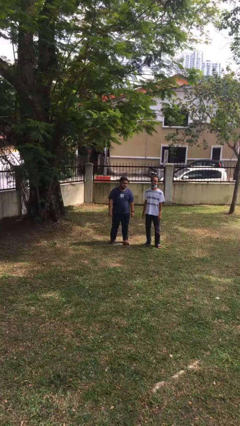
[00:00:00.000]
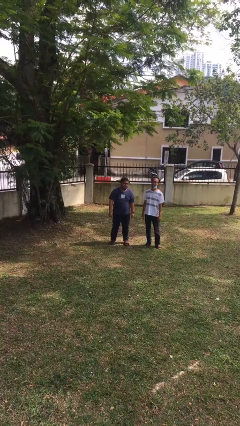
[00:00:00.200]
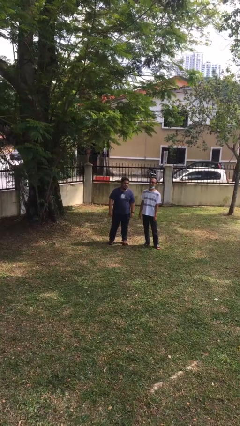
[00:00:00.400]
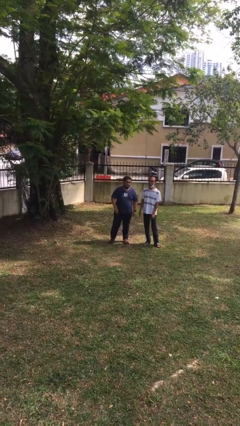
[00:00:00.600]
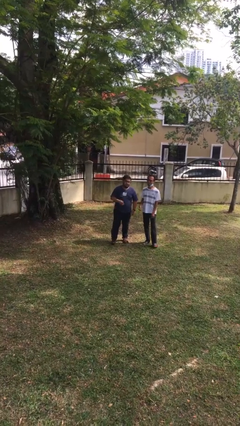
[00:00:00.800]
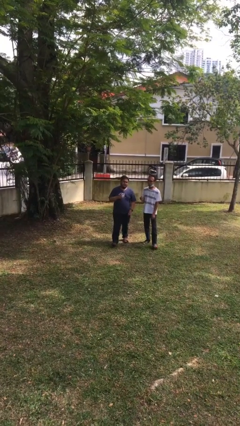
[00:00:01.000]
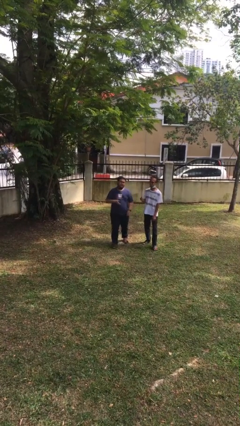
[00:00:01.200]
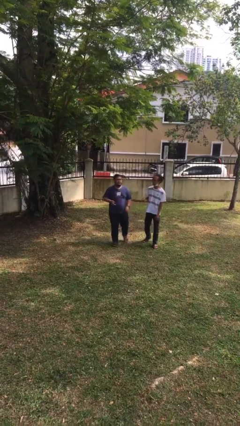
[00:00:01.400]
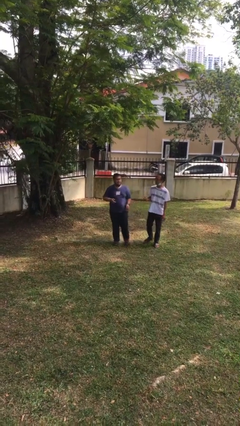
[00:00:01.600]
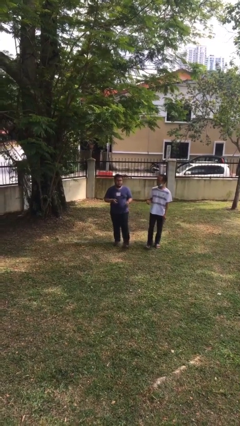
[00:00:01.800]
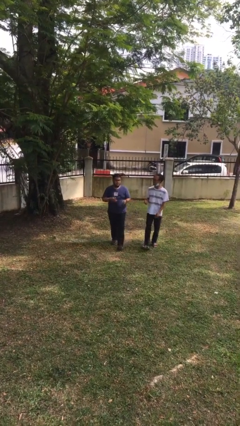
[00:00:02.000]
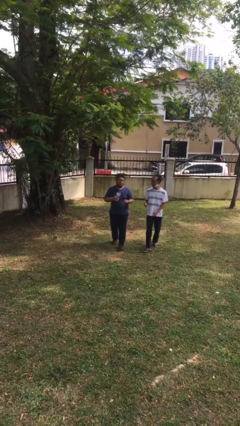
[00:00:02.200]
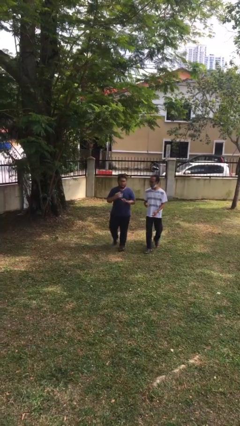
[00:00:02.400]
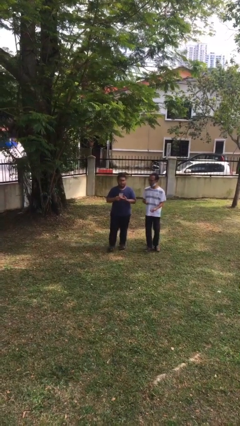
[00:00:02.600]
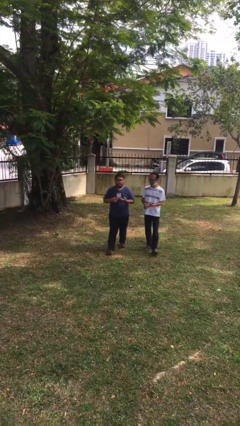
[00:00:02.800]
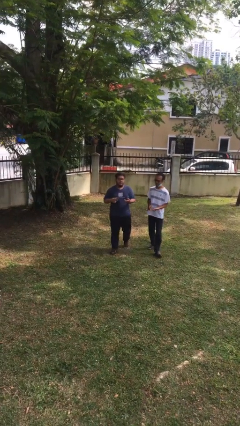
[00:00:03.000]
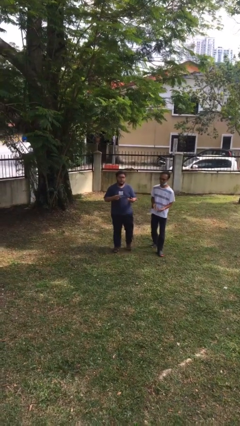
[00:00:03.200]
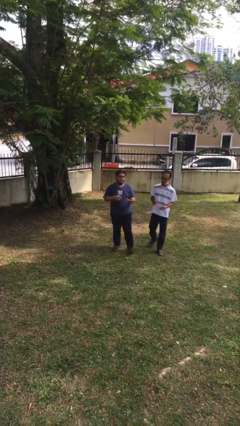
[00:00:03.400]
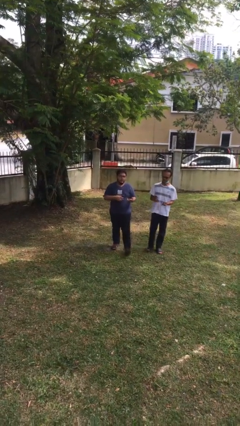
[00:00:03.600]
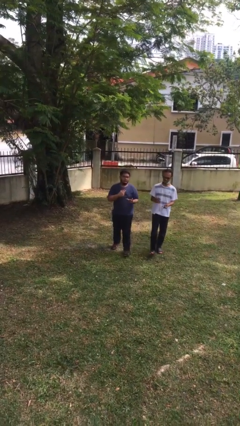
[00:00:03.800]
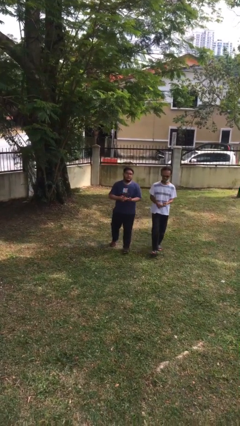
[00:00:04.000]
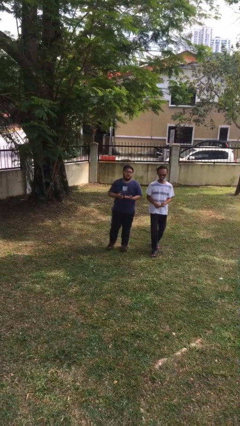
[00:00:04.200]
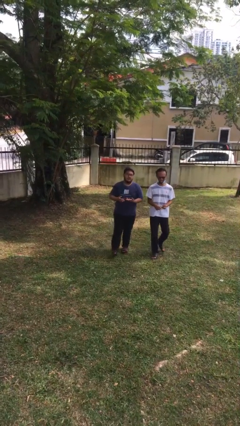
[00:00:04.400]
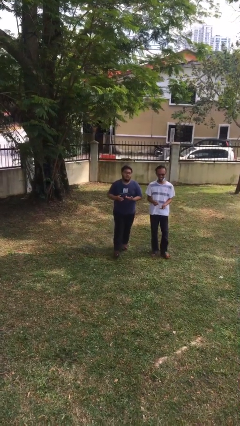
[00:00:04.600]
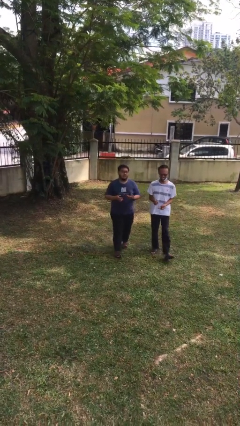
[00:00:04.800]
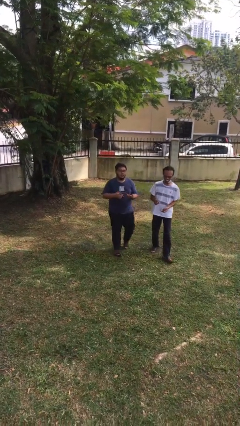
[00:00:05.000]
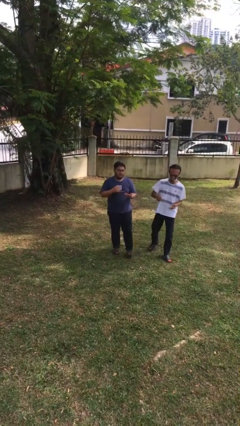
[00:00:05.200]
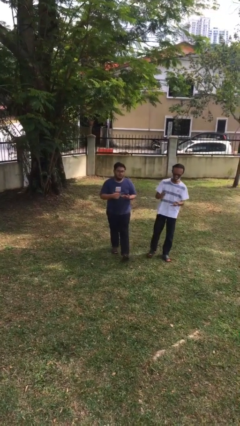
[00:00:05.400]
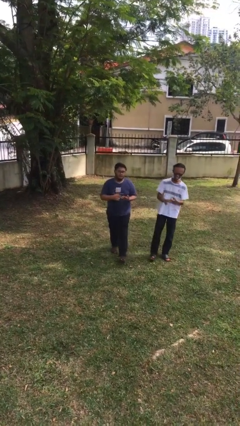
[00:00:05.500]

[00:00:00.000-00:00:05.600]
person talks to person

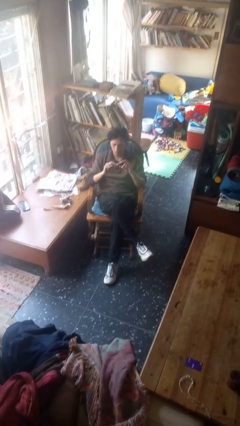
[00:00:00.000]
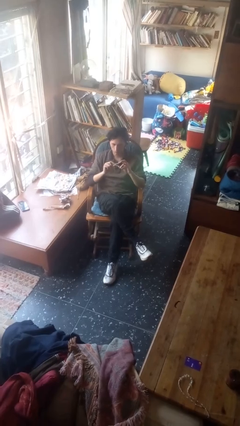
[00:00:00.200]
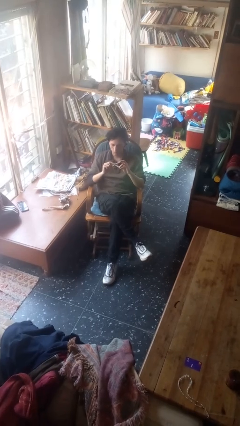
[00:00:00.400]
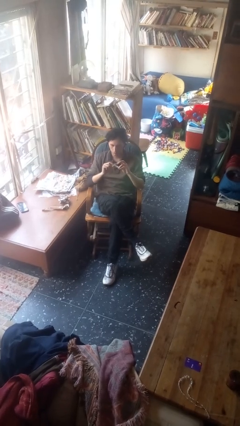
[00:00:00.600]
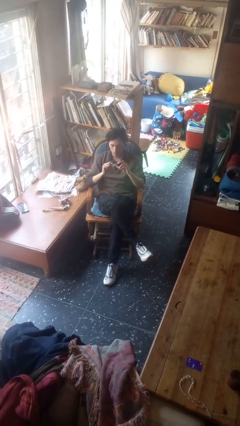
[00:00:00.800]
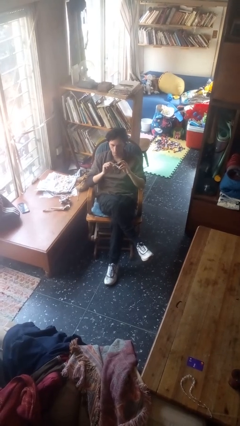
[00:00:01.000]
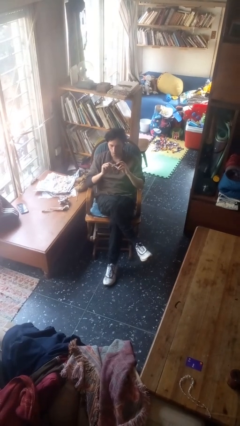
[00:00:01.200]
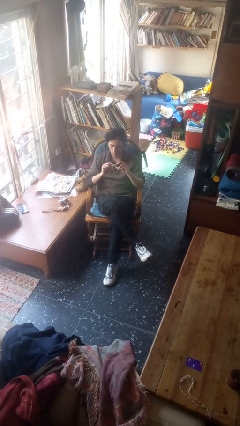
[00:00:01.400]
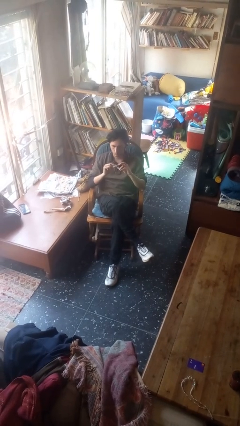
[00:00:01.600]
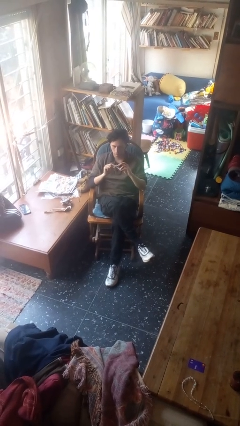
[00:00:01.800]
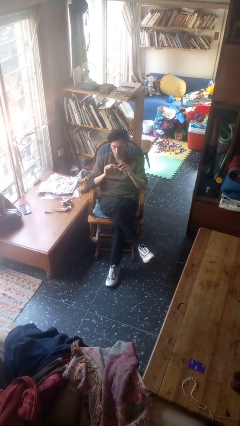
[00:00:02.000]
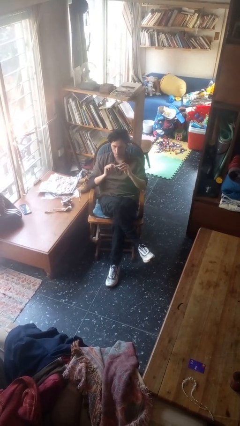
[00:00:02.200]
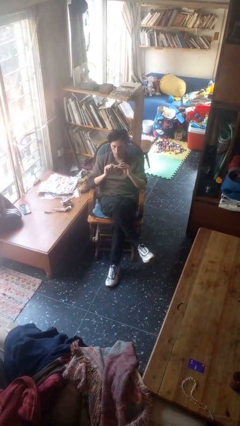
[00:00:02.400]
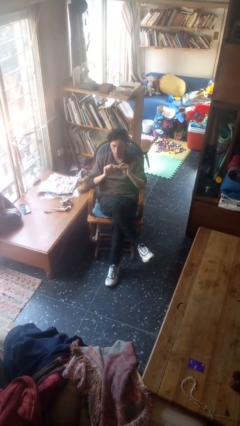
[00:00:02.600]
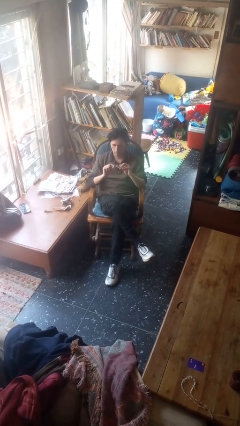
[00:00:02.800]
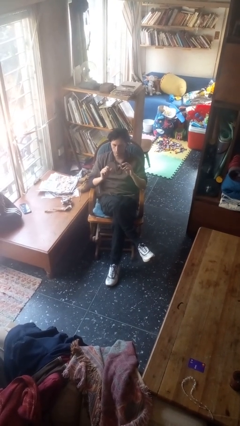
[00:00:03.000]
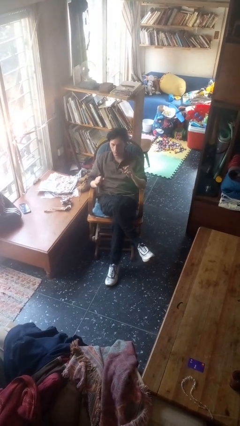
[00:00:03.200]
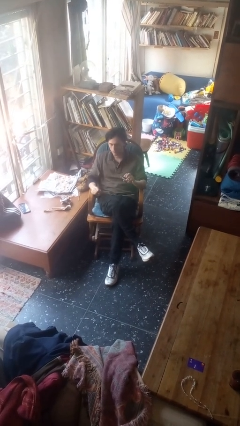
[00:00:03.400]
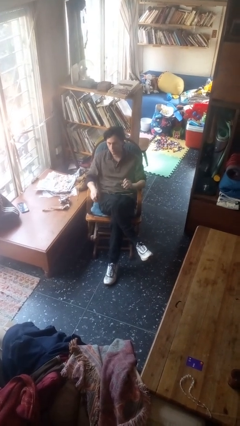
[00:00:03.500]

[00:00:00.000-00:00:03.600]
person clips fingernails

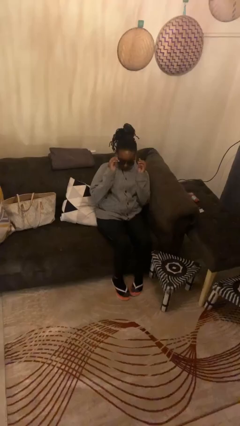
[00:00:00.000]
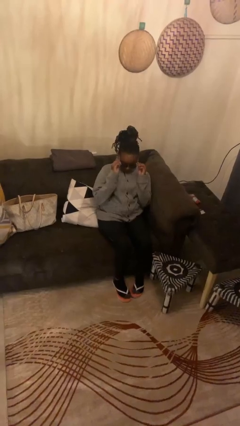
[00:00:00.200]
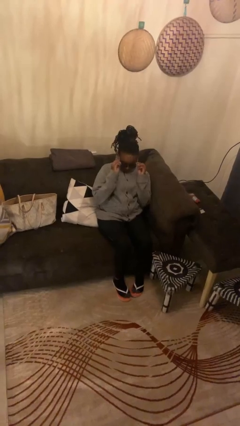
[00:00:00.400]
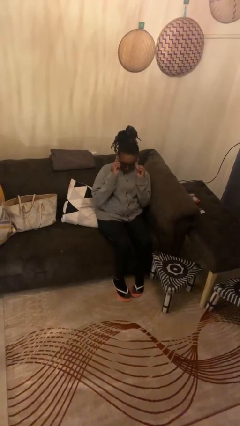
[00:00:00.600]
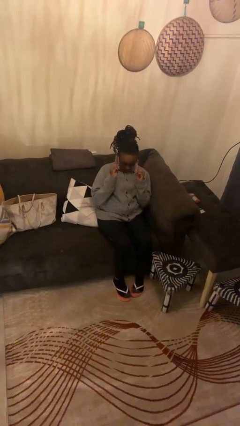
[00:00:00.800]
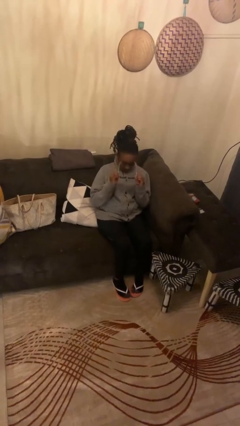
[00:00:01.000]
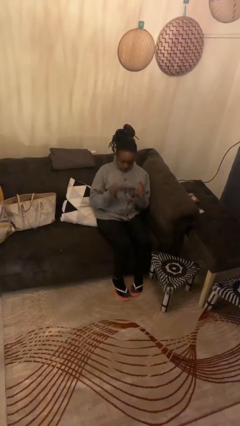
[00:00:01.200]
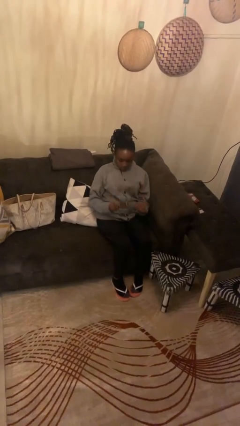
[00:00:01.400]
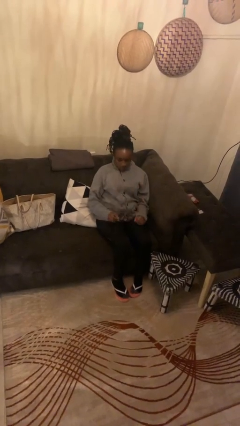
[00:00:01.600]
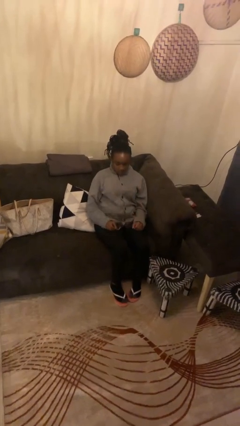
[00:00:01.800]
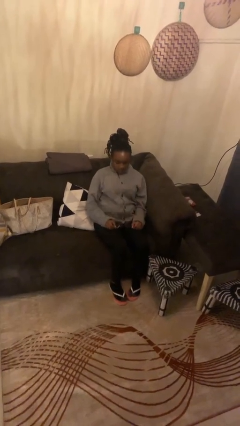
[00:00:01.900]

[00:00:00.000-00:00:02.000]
person takes off sunglasses

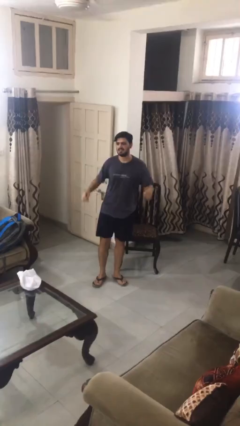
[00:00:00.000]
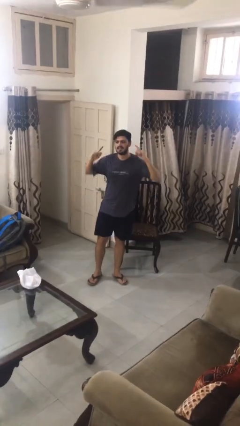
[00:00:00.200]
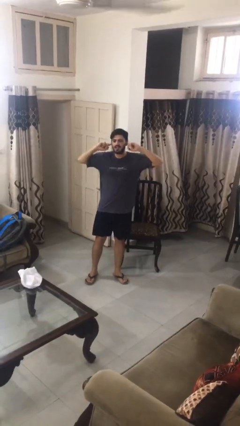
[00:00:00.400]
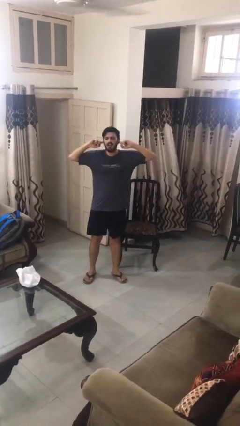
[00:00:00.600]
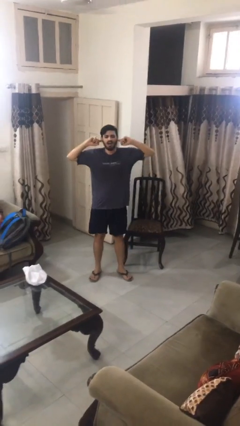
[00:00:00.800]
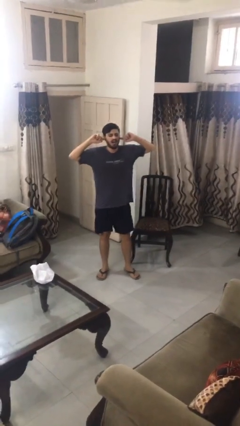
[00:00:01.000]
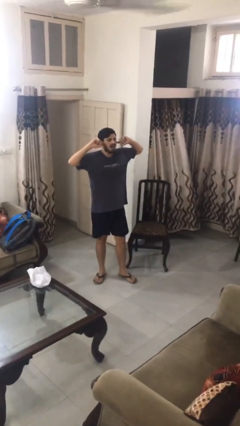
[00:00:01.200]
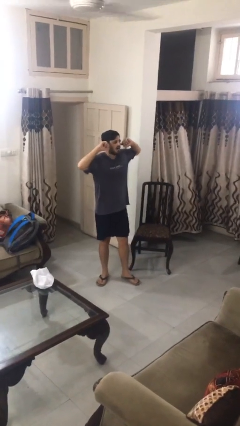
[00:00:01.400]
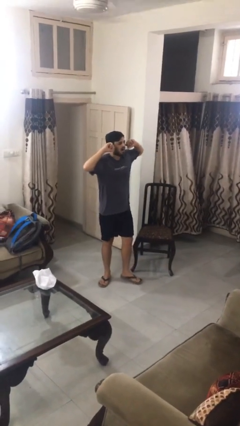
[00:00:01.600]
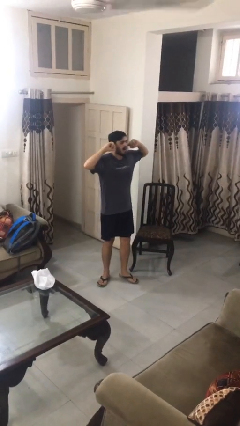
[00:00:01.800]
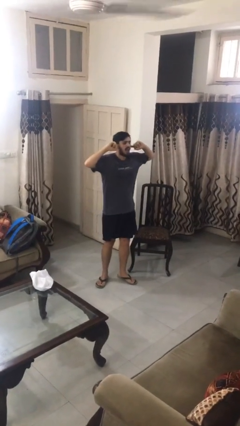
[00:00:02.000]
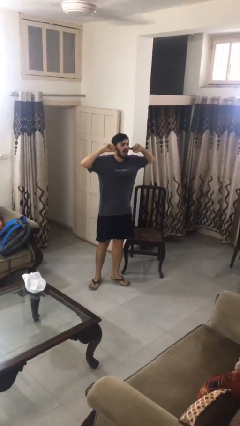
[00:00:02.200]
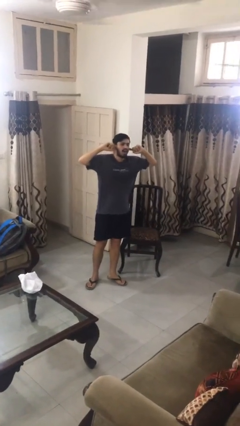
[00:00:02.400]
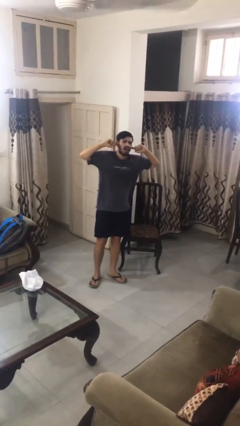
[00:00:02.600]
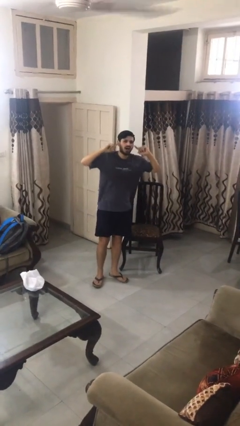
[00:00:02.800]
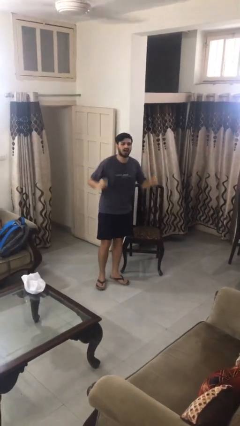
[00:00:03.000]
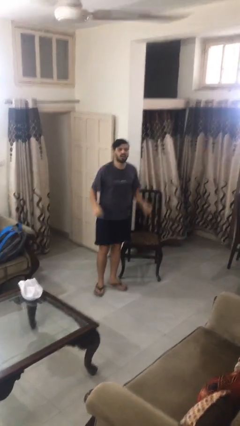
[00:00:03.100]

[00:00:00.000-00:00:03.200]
person puts fingers in ear

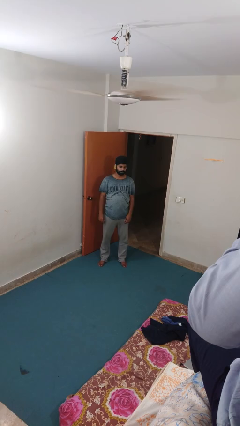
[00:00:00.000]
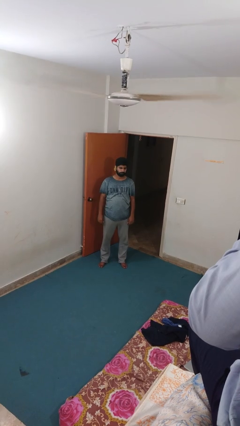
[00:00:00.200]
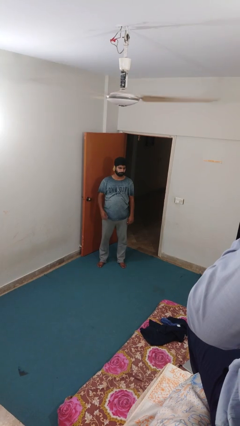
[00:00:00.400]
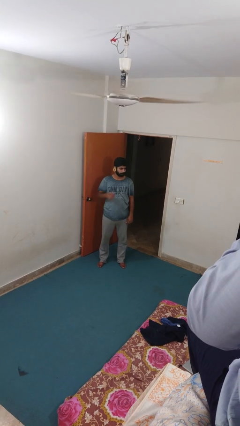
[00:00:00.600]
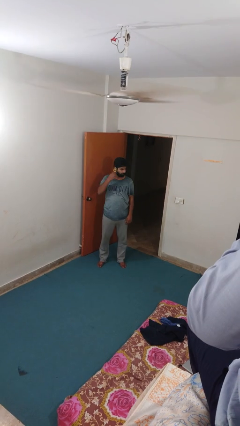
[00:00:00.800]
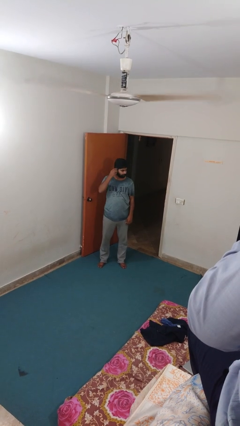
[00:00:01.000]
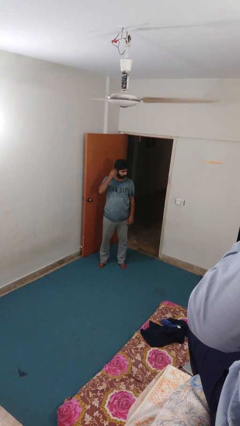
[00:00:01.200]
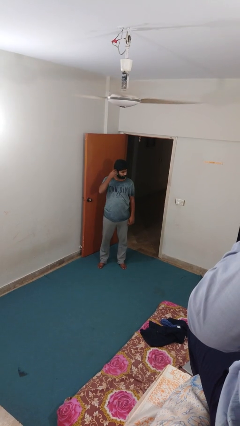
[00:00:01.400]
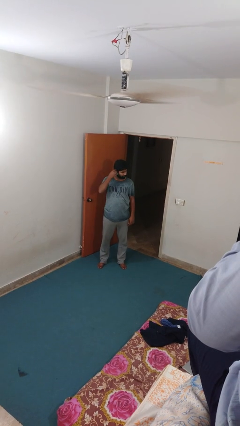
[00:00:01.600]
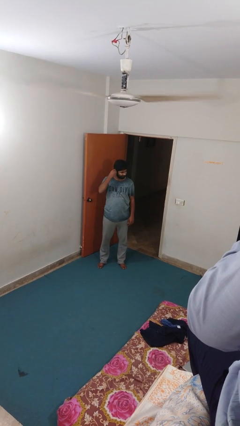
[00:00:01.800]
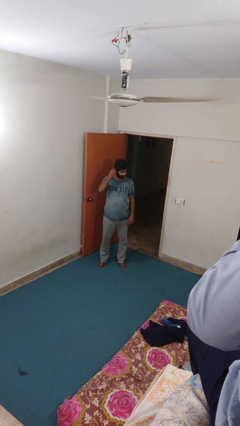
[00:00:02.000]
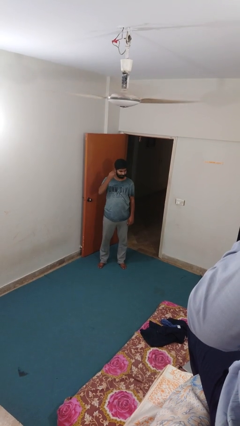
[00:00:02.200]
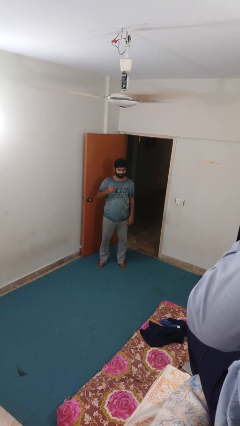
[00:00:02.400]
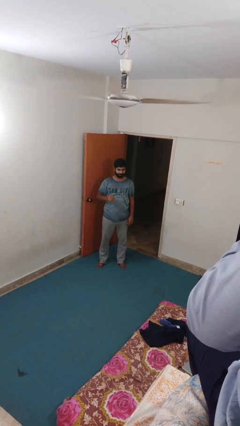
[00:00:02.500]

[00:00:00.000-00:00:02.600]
person takes off earrings

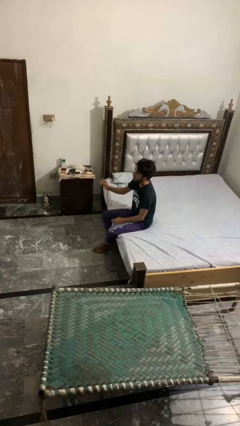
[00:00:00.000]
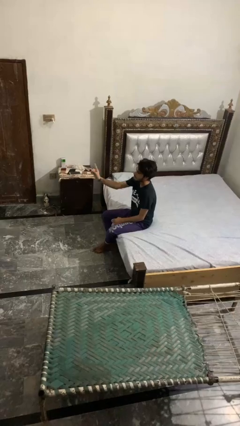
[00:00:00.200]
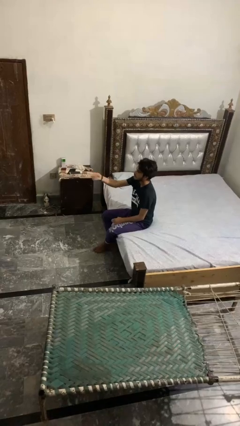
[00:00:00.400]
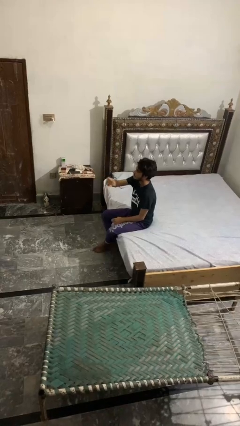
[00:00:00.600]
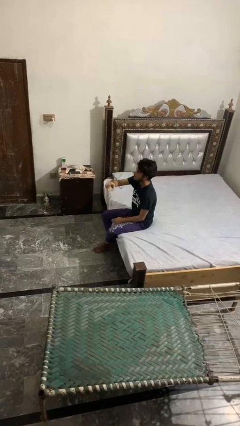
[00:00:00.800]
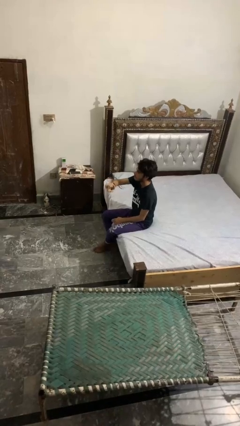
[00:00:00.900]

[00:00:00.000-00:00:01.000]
person gestures swipe left
